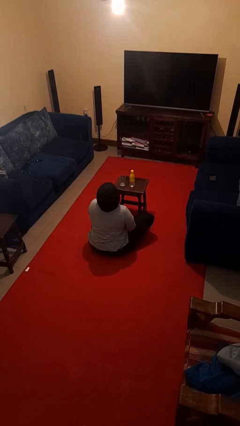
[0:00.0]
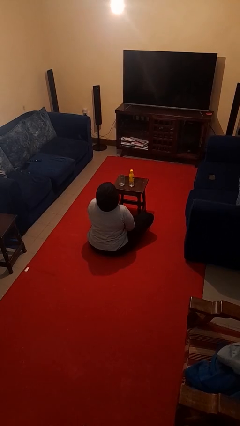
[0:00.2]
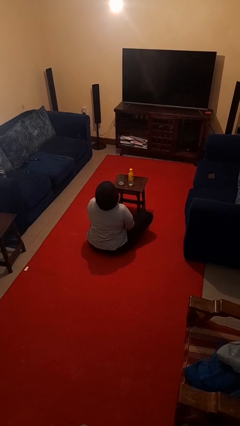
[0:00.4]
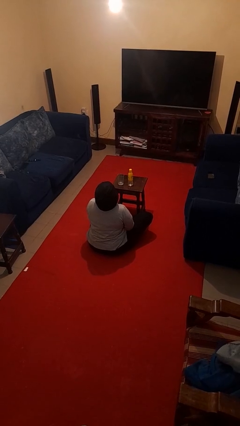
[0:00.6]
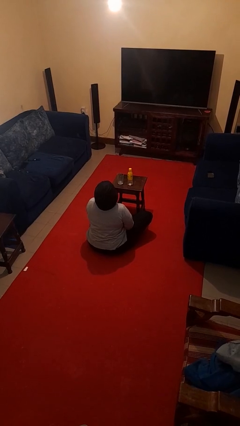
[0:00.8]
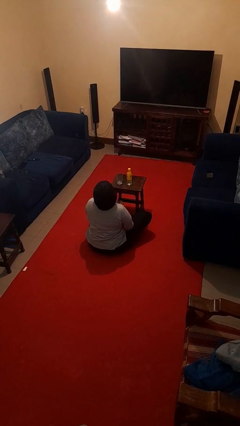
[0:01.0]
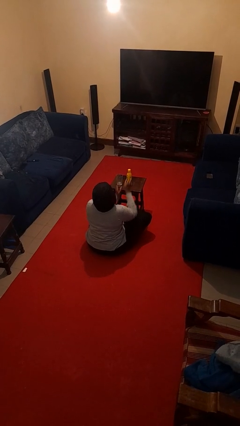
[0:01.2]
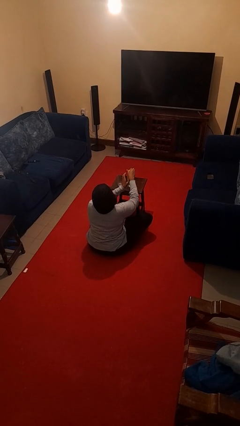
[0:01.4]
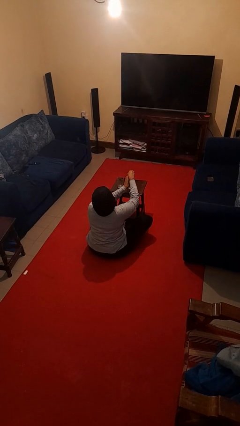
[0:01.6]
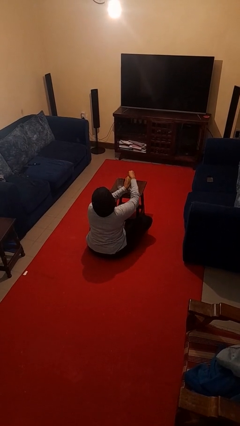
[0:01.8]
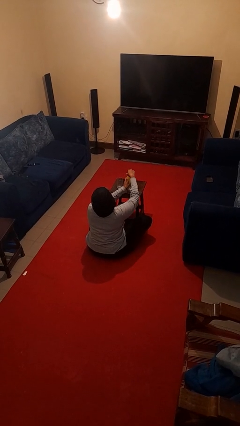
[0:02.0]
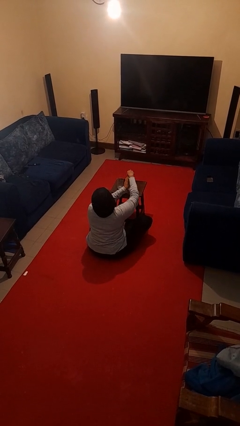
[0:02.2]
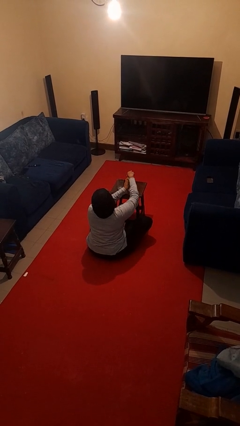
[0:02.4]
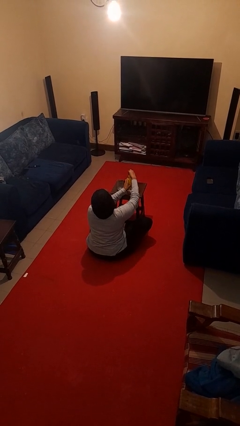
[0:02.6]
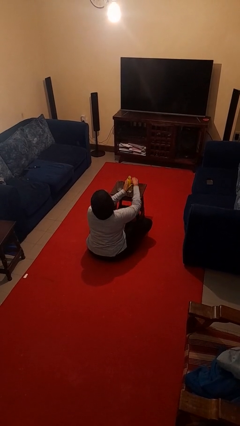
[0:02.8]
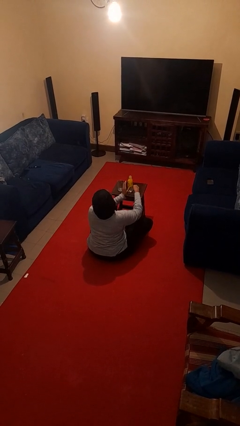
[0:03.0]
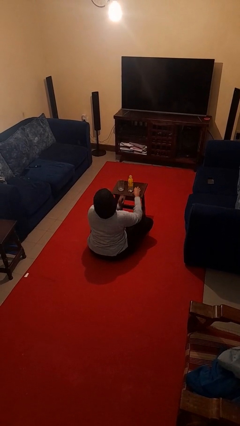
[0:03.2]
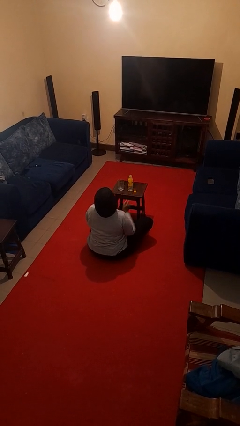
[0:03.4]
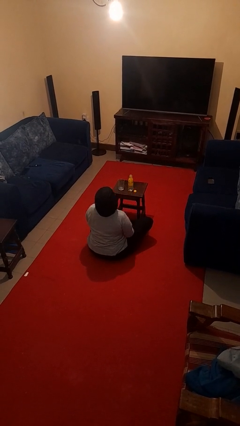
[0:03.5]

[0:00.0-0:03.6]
person unscrews lid from bottle

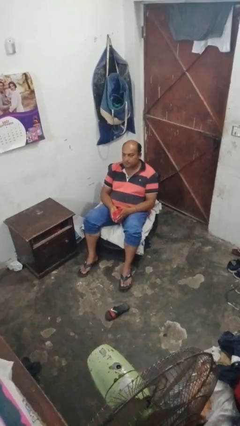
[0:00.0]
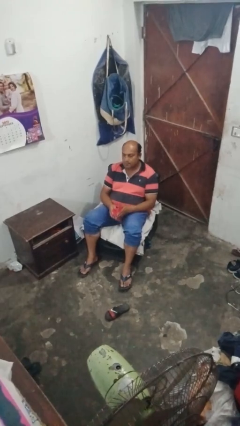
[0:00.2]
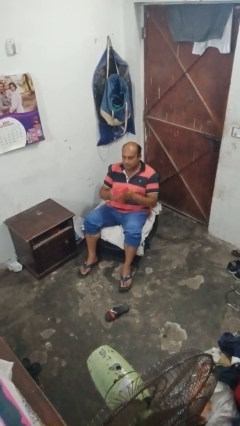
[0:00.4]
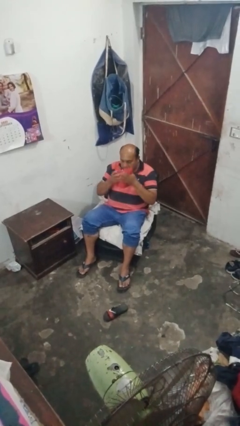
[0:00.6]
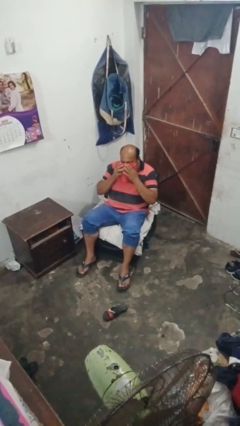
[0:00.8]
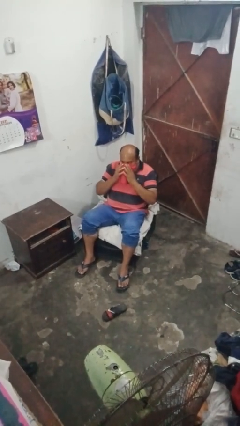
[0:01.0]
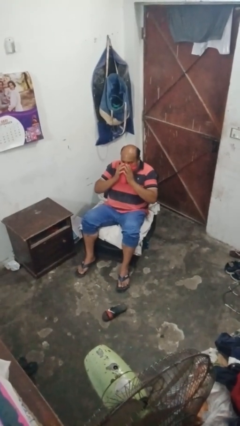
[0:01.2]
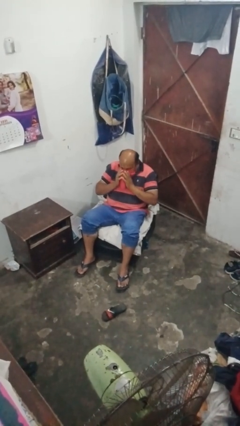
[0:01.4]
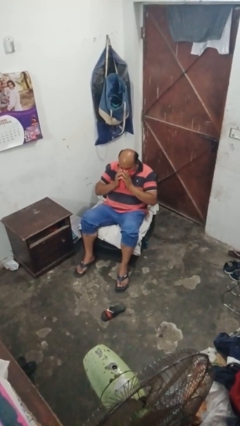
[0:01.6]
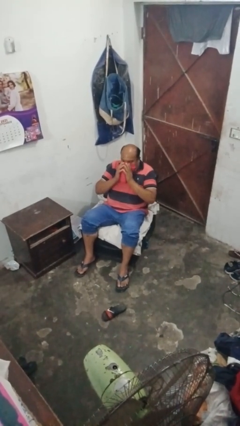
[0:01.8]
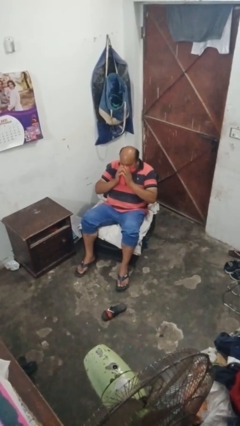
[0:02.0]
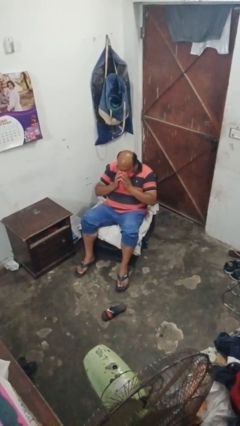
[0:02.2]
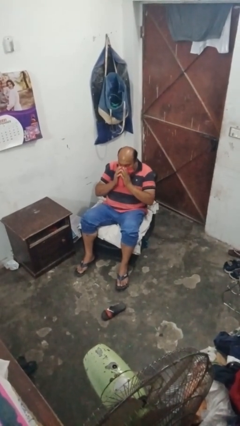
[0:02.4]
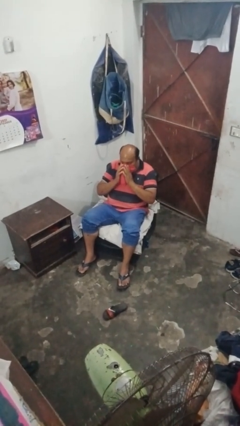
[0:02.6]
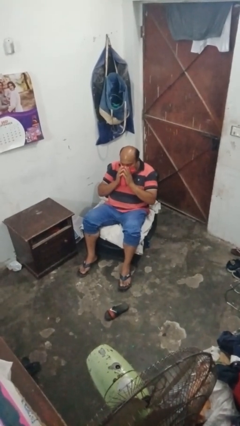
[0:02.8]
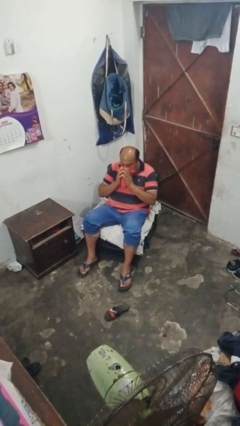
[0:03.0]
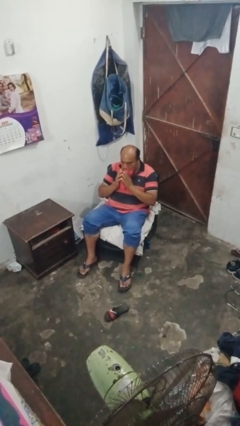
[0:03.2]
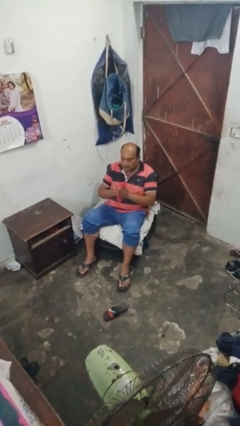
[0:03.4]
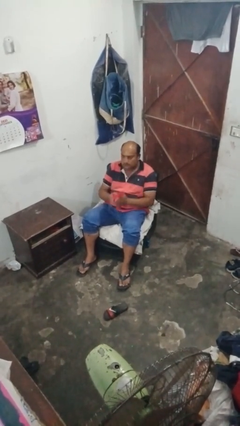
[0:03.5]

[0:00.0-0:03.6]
person blows nose

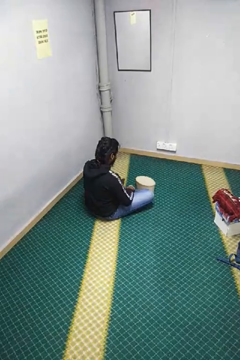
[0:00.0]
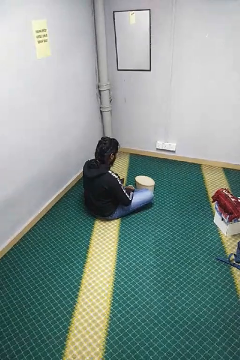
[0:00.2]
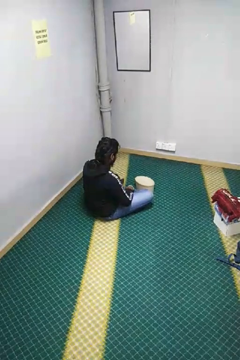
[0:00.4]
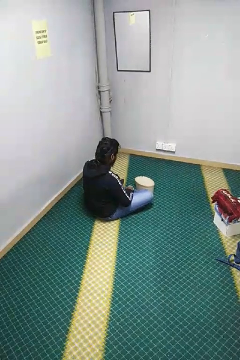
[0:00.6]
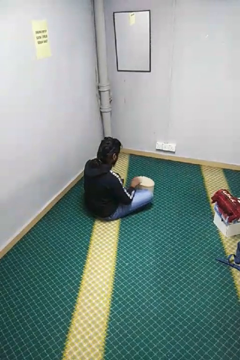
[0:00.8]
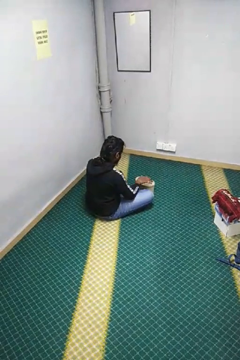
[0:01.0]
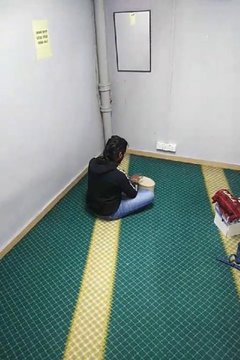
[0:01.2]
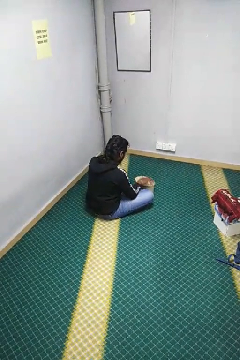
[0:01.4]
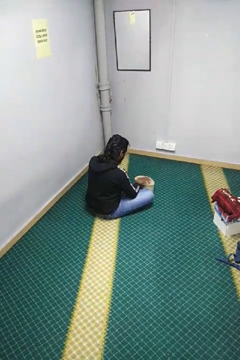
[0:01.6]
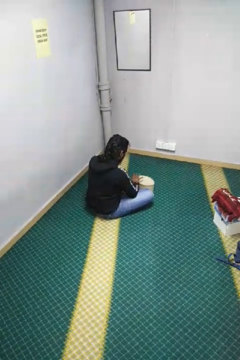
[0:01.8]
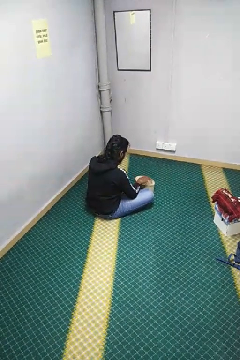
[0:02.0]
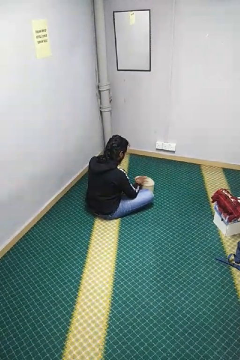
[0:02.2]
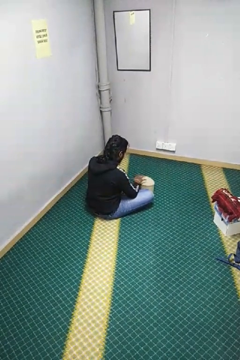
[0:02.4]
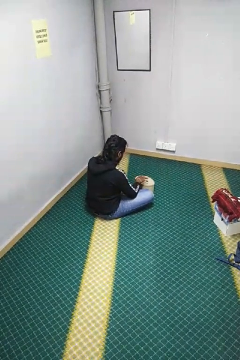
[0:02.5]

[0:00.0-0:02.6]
person waves hand over object

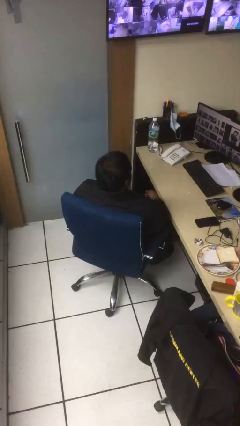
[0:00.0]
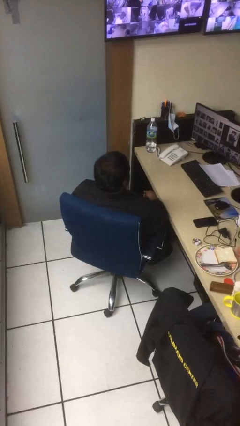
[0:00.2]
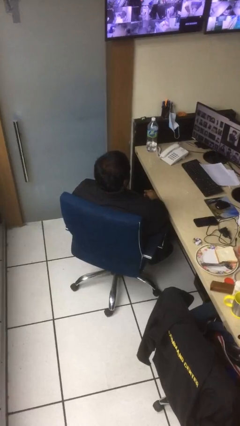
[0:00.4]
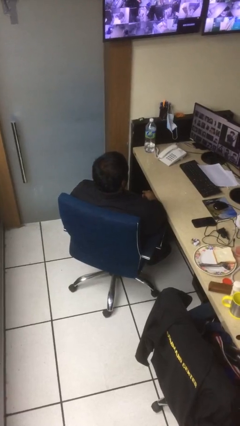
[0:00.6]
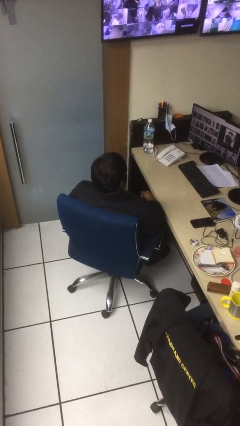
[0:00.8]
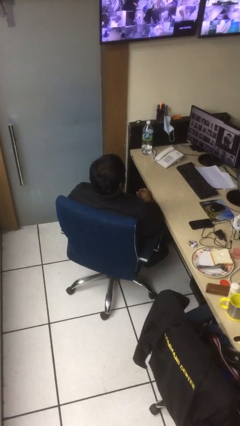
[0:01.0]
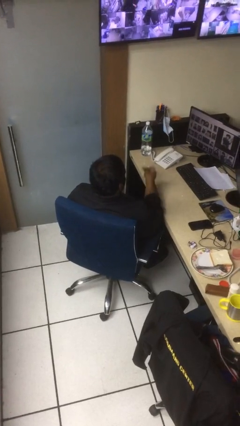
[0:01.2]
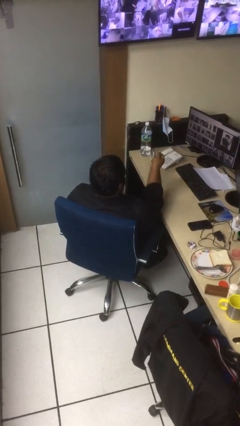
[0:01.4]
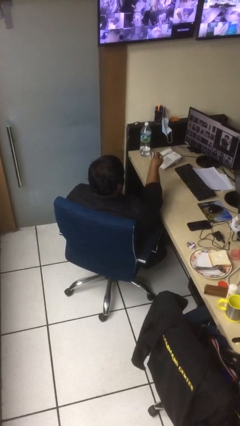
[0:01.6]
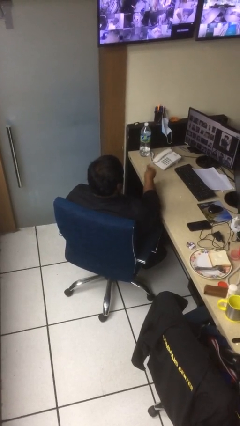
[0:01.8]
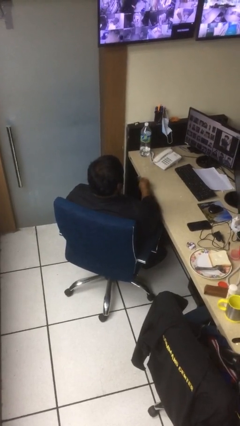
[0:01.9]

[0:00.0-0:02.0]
person snaps fingers

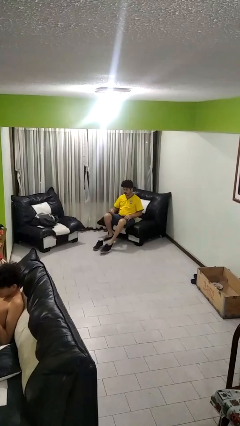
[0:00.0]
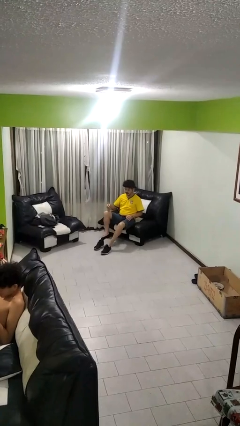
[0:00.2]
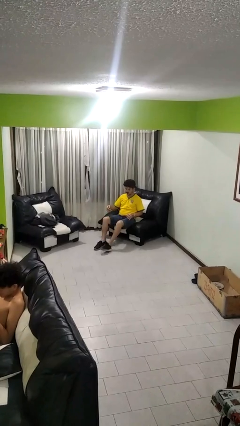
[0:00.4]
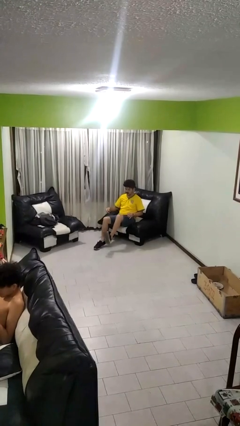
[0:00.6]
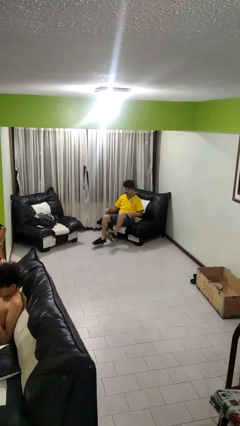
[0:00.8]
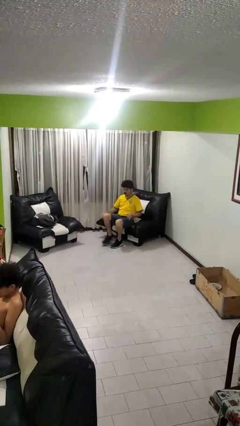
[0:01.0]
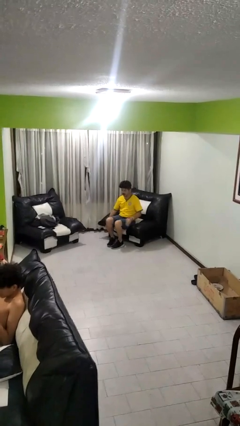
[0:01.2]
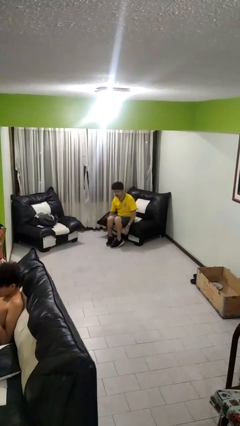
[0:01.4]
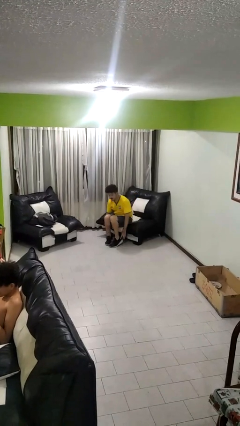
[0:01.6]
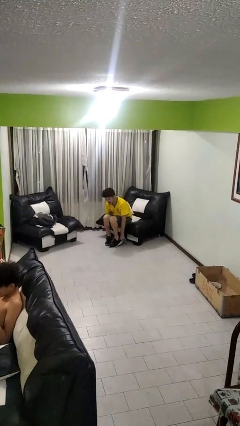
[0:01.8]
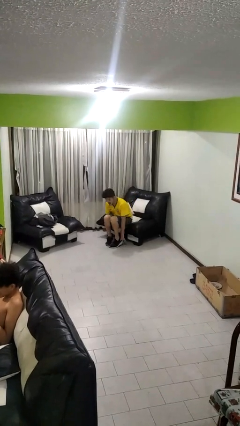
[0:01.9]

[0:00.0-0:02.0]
person puts on shoes

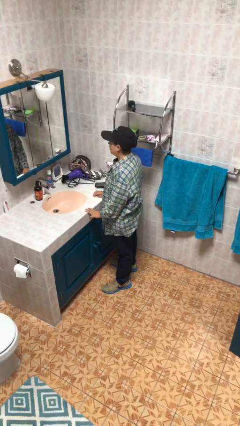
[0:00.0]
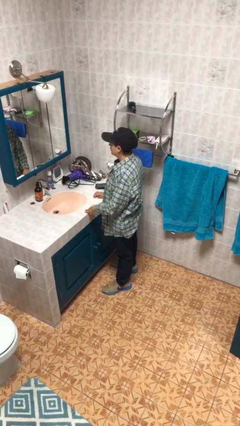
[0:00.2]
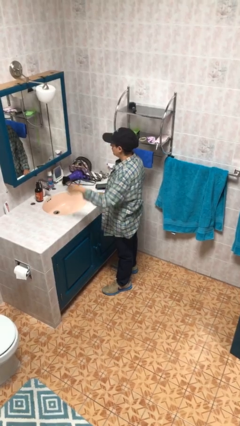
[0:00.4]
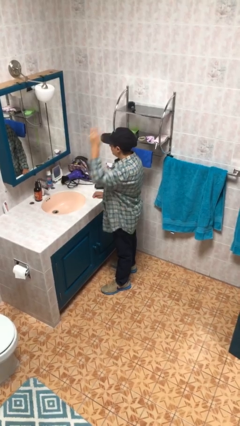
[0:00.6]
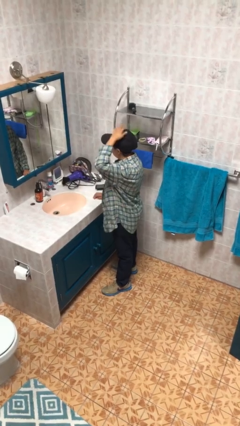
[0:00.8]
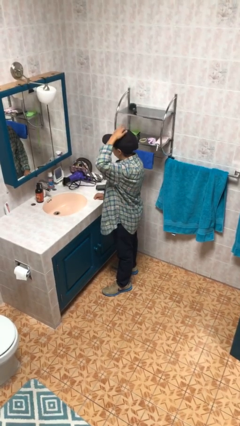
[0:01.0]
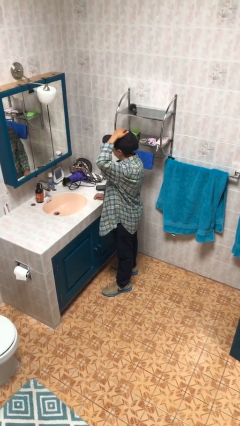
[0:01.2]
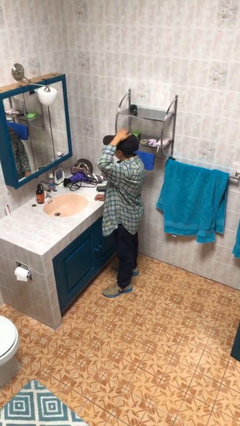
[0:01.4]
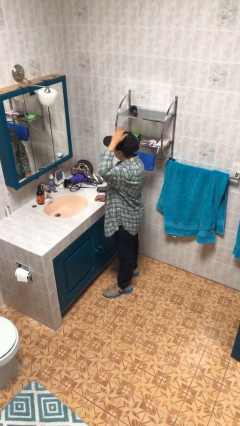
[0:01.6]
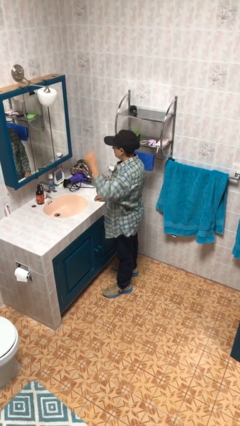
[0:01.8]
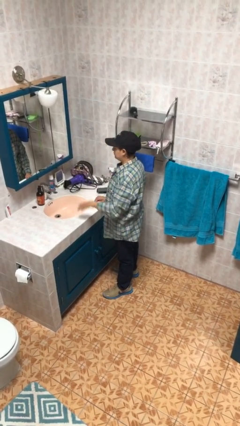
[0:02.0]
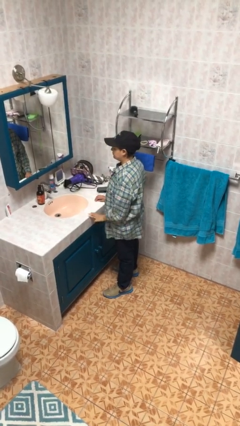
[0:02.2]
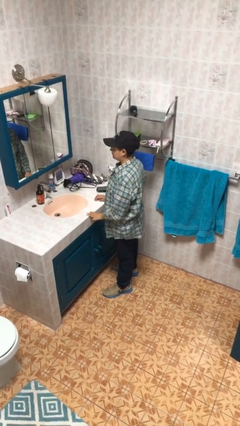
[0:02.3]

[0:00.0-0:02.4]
person pats head

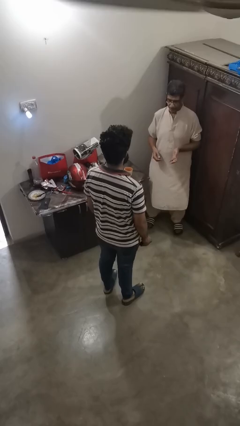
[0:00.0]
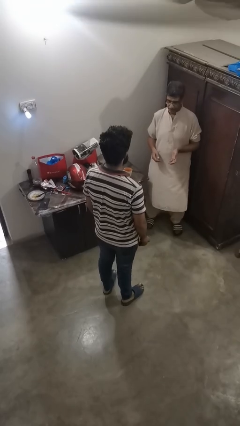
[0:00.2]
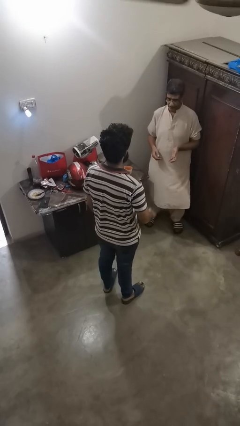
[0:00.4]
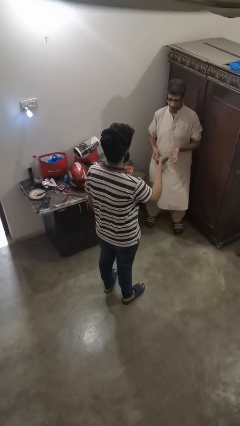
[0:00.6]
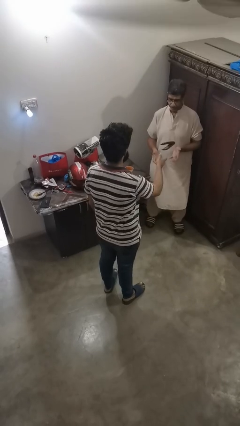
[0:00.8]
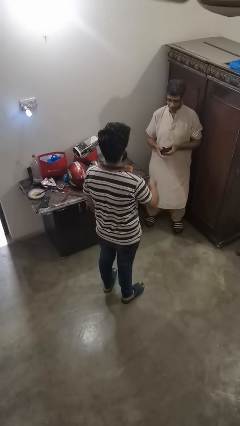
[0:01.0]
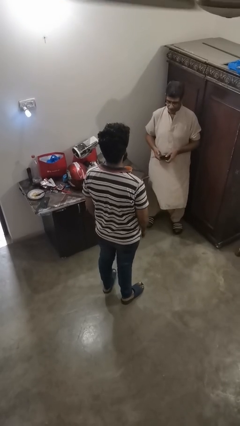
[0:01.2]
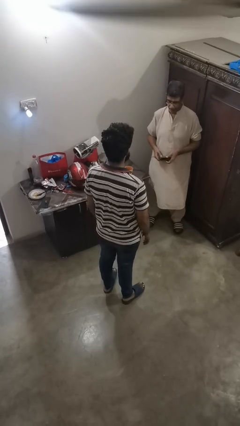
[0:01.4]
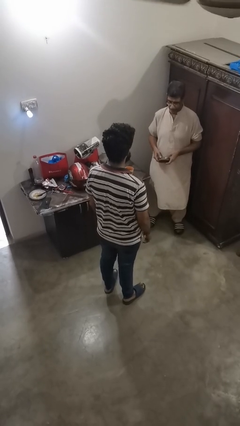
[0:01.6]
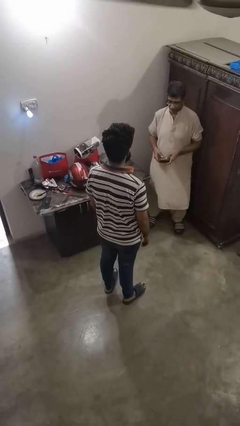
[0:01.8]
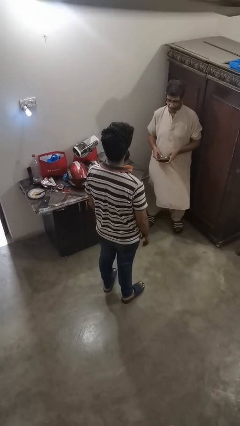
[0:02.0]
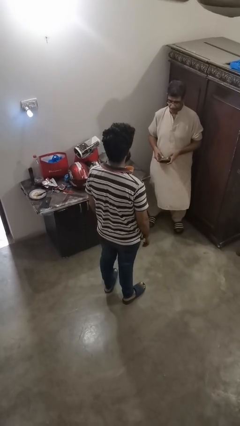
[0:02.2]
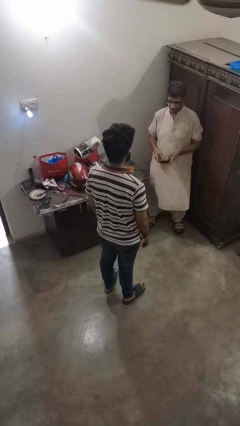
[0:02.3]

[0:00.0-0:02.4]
person throws object to person
